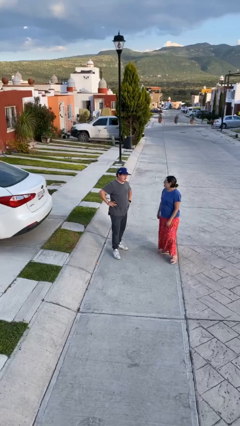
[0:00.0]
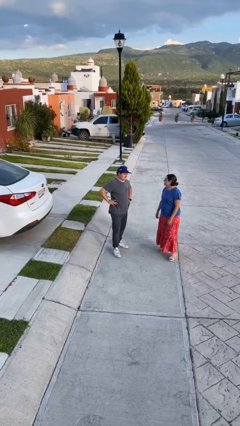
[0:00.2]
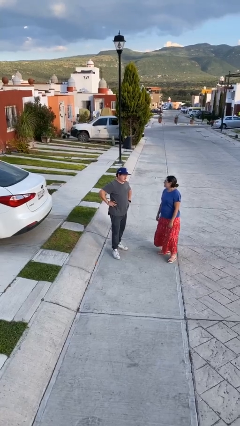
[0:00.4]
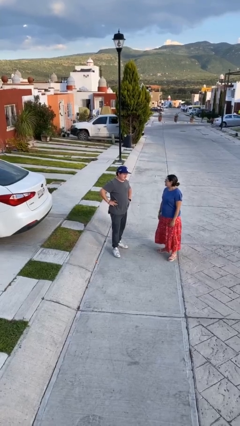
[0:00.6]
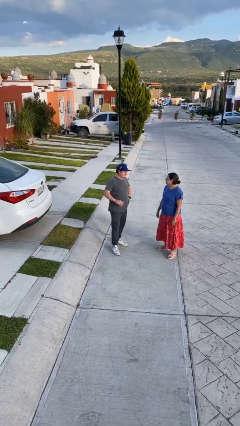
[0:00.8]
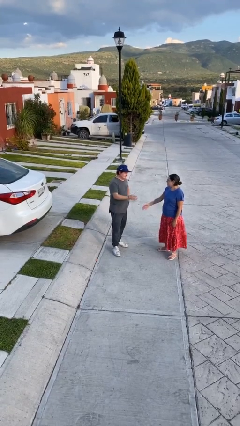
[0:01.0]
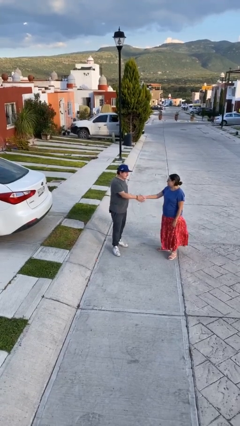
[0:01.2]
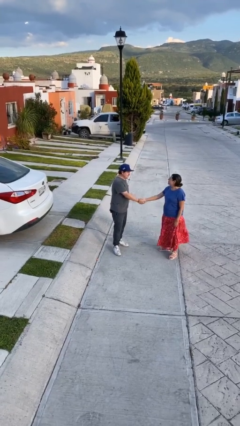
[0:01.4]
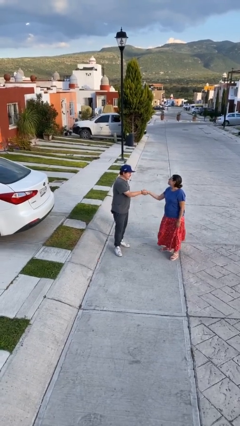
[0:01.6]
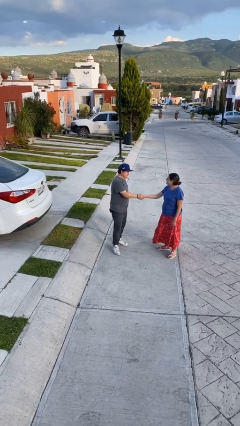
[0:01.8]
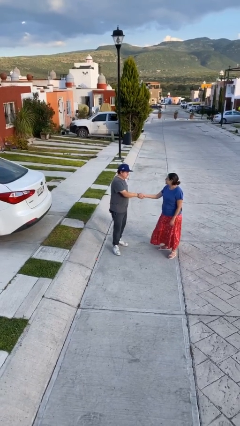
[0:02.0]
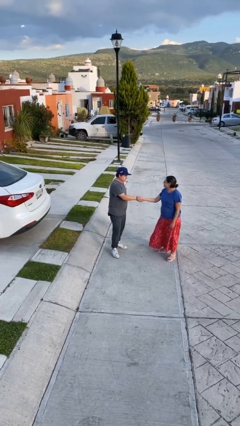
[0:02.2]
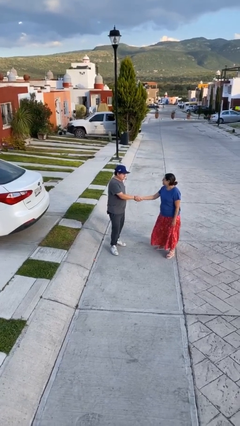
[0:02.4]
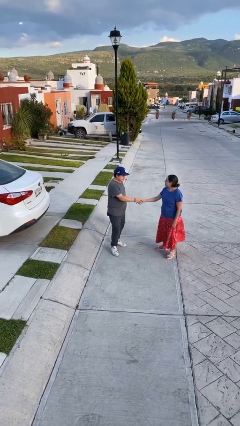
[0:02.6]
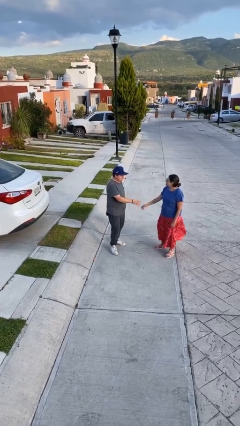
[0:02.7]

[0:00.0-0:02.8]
person shakes hand

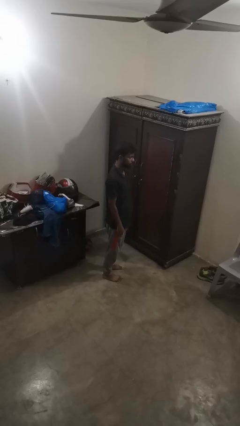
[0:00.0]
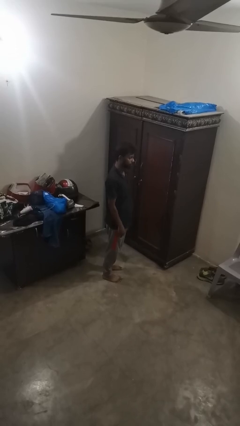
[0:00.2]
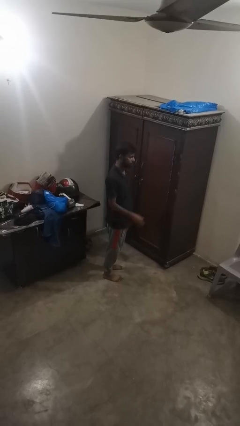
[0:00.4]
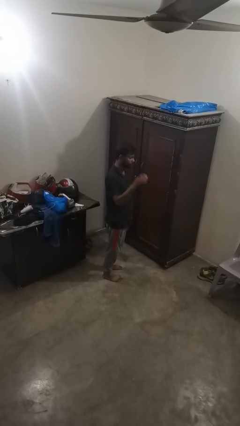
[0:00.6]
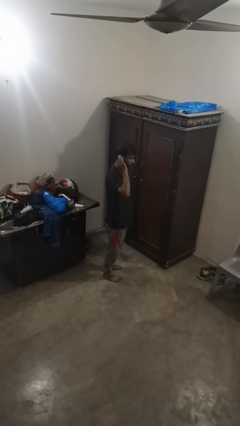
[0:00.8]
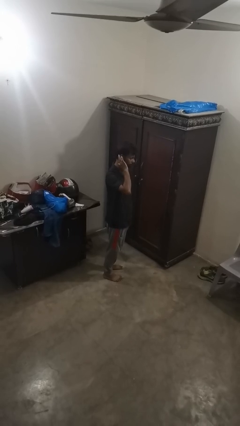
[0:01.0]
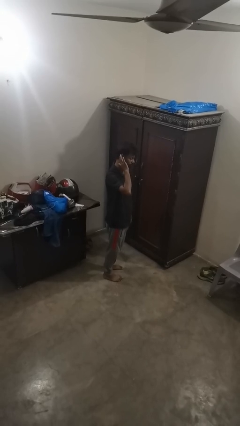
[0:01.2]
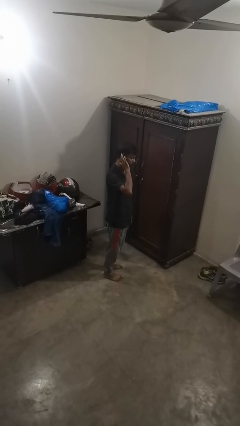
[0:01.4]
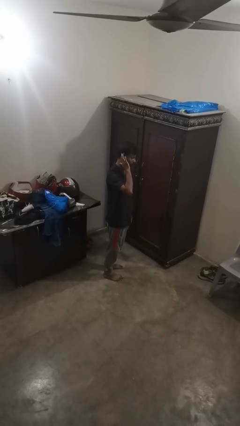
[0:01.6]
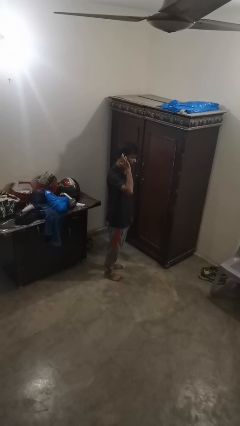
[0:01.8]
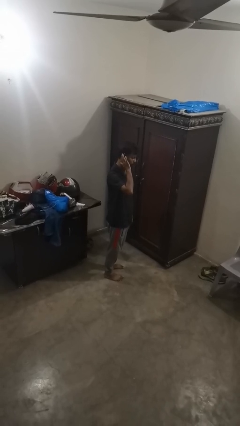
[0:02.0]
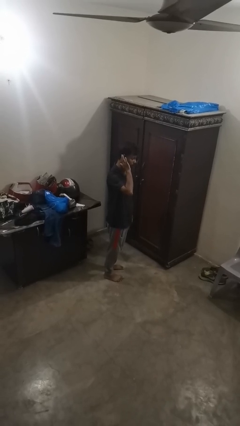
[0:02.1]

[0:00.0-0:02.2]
person gestures listen closely

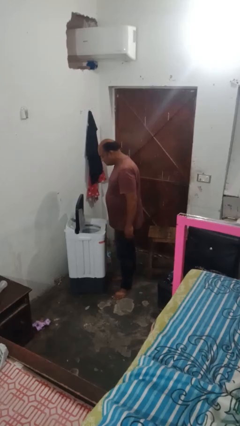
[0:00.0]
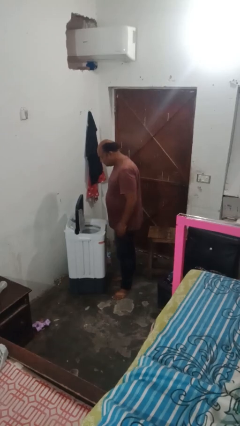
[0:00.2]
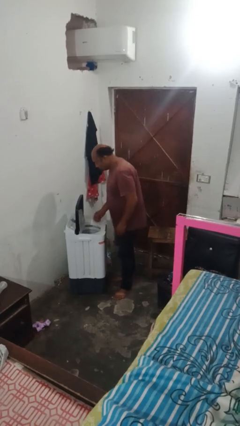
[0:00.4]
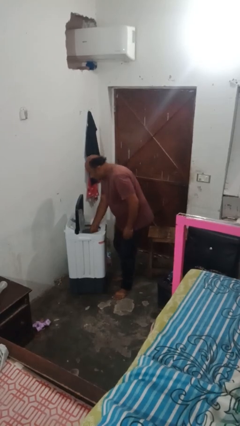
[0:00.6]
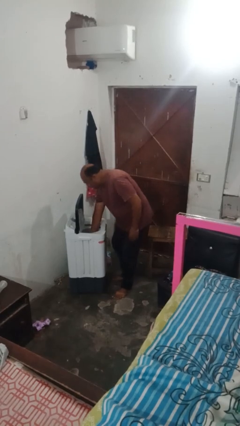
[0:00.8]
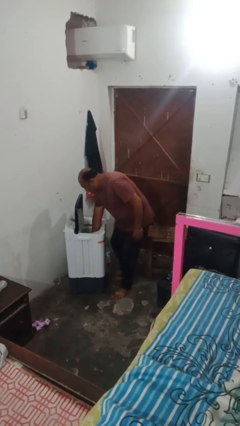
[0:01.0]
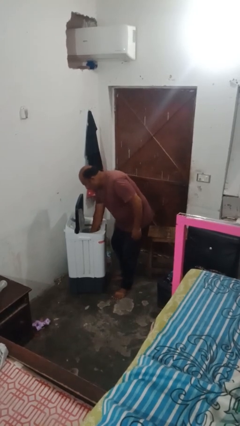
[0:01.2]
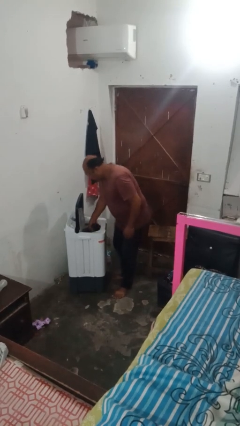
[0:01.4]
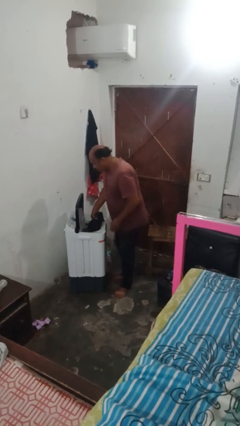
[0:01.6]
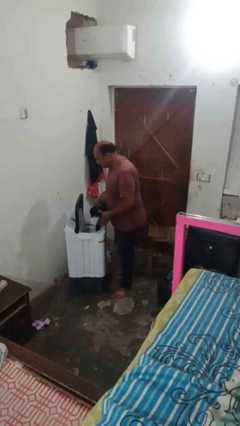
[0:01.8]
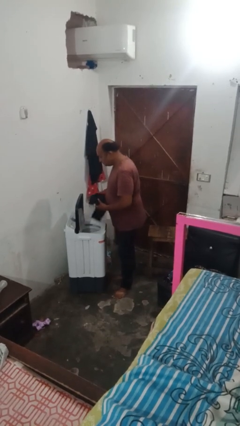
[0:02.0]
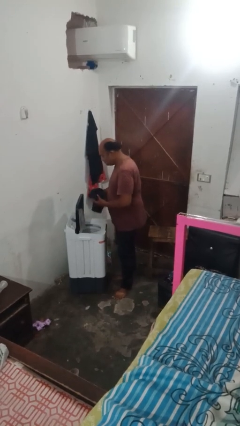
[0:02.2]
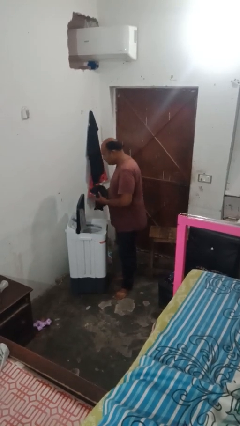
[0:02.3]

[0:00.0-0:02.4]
person unloads clotheswasher

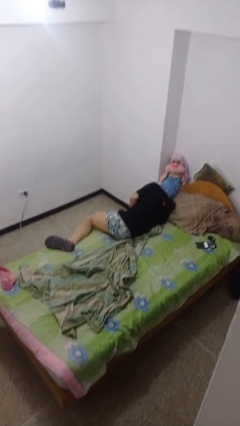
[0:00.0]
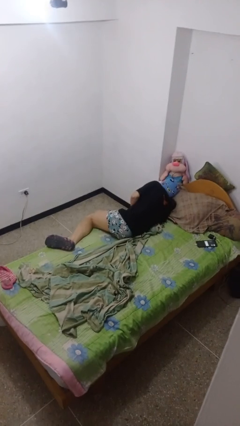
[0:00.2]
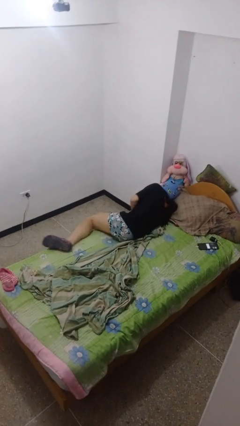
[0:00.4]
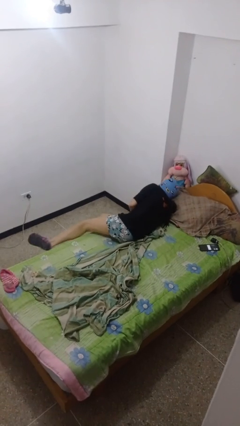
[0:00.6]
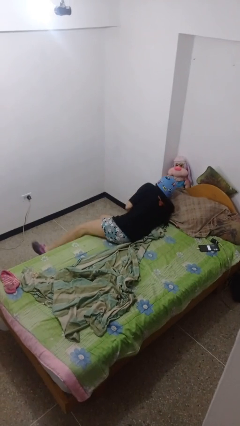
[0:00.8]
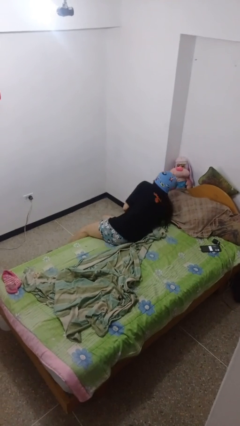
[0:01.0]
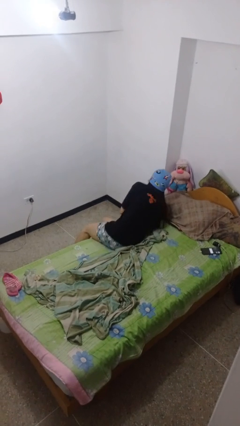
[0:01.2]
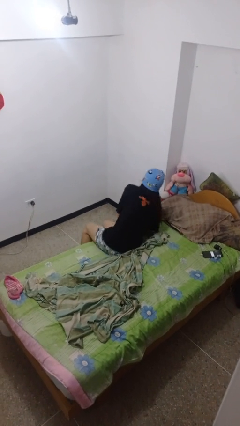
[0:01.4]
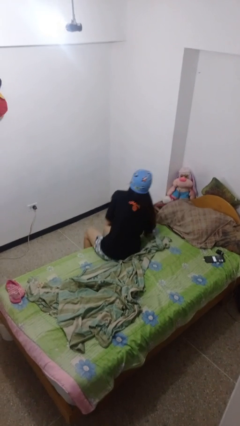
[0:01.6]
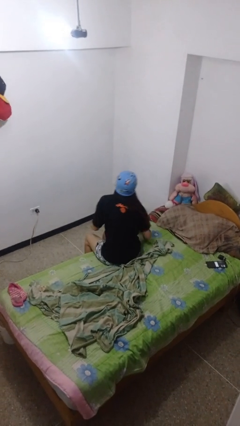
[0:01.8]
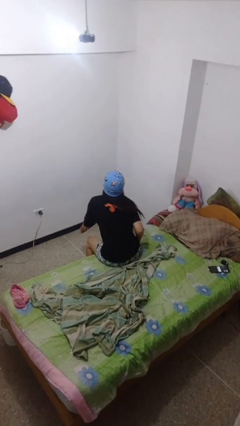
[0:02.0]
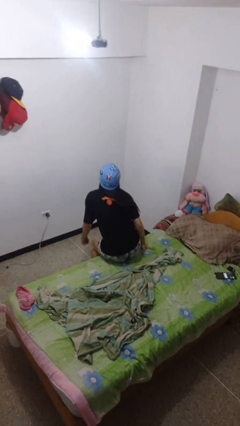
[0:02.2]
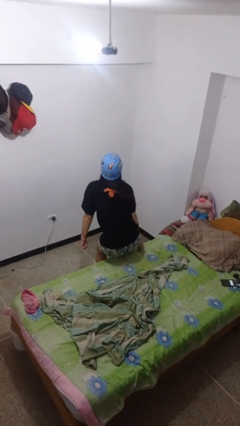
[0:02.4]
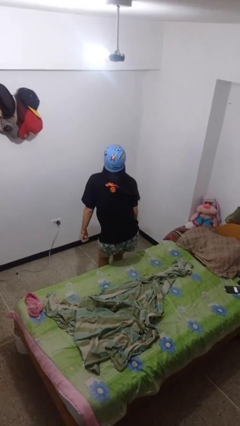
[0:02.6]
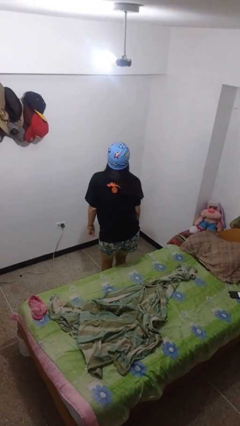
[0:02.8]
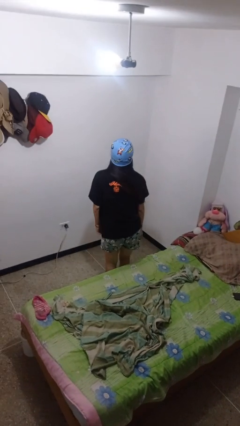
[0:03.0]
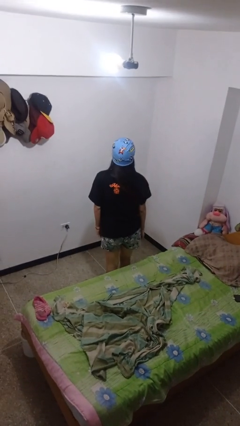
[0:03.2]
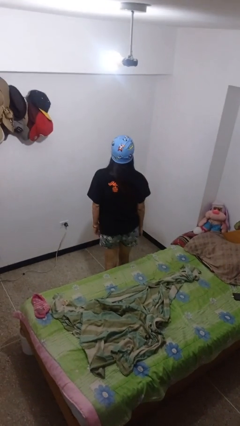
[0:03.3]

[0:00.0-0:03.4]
person stands up

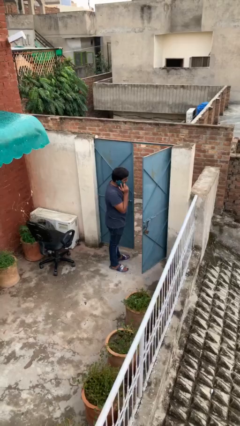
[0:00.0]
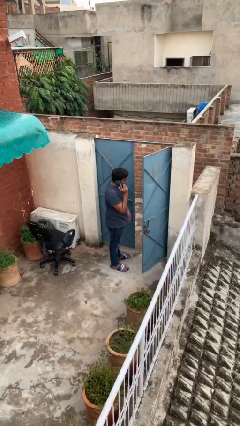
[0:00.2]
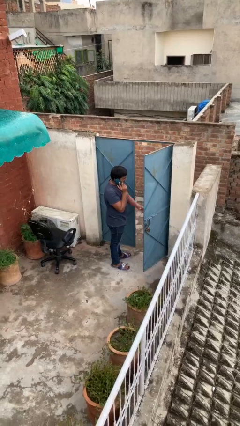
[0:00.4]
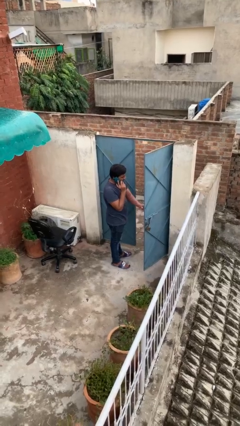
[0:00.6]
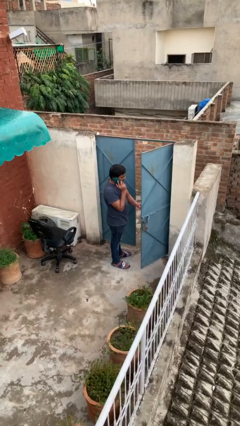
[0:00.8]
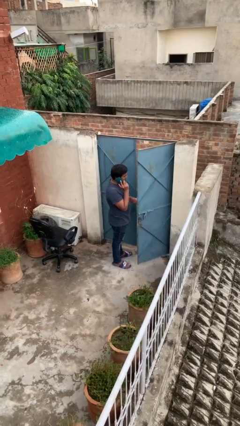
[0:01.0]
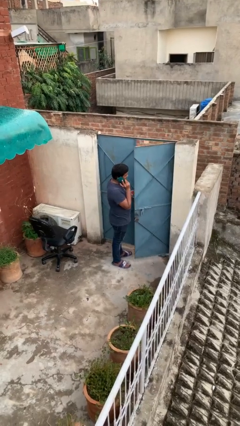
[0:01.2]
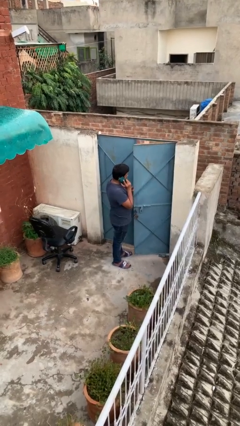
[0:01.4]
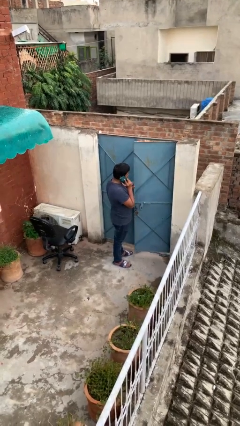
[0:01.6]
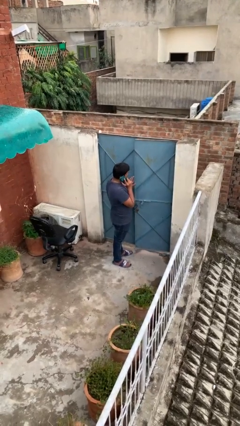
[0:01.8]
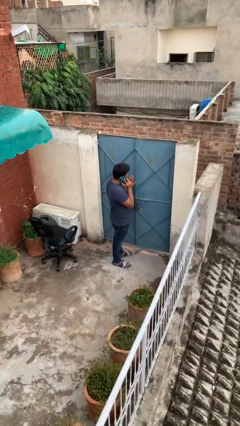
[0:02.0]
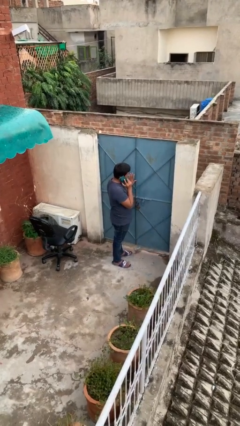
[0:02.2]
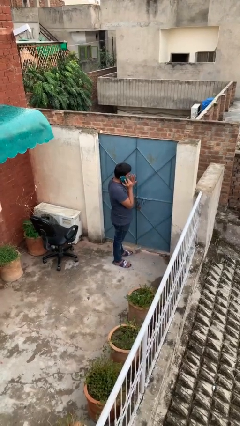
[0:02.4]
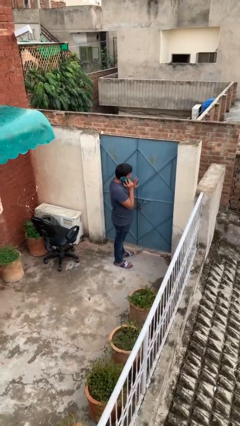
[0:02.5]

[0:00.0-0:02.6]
person closes facility door

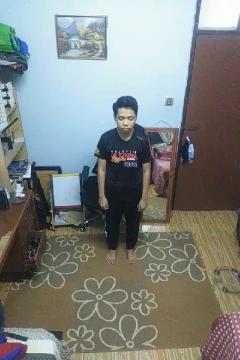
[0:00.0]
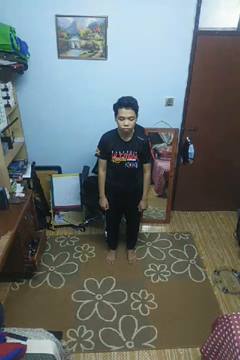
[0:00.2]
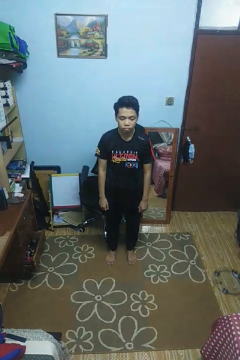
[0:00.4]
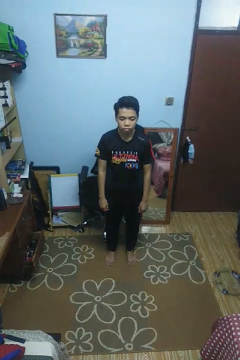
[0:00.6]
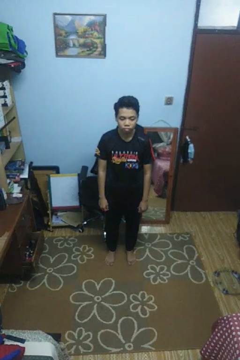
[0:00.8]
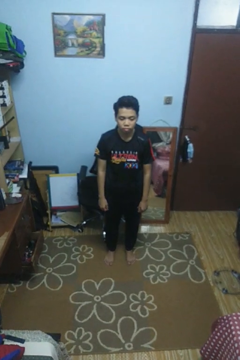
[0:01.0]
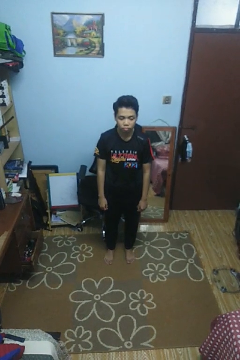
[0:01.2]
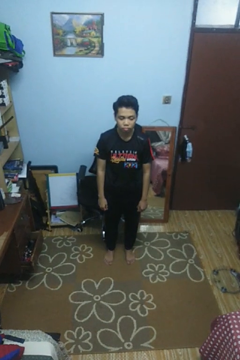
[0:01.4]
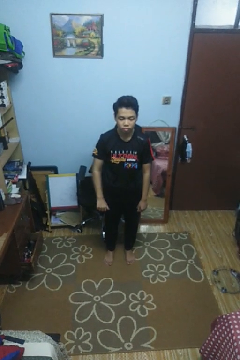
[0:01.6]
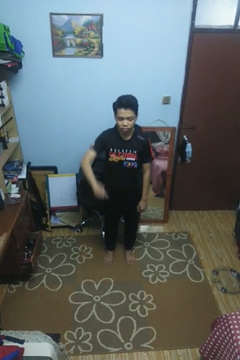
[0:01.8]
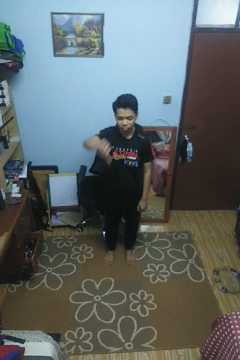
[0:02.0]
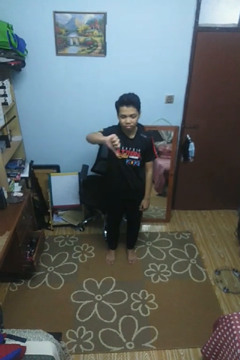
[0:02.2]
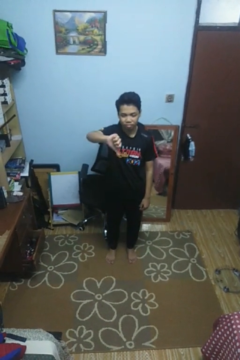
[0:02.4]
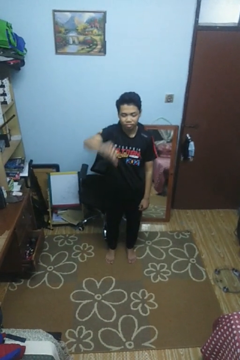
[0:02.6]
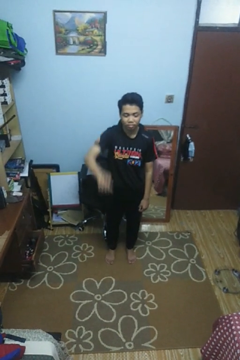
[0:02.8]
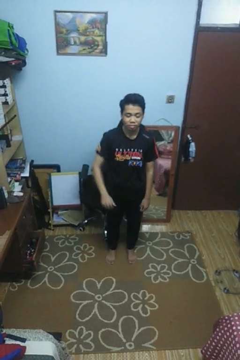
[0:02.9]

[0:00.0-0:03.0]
person gestures thumbs down

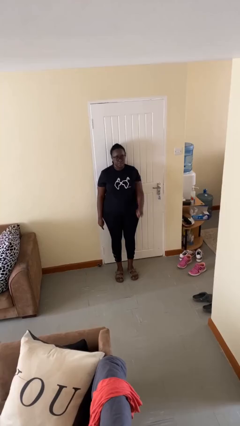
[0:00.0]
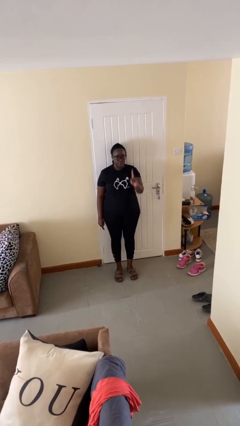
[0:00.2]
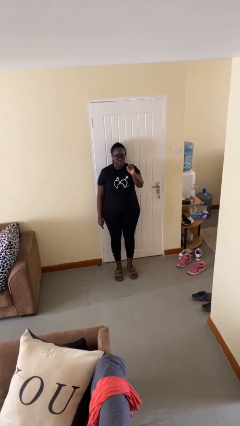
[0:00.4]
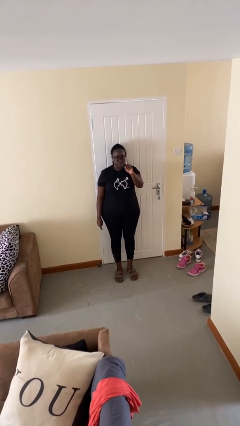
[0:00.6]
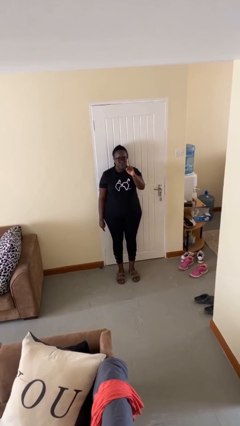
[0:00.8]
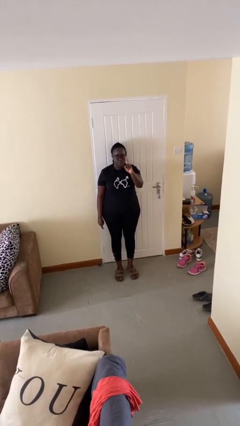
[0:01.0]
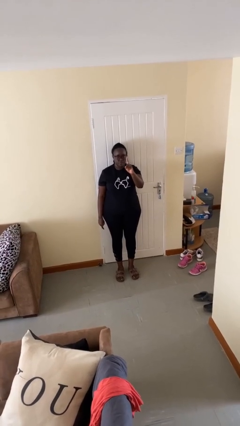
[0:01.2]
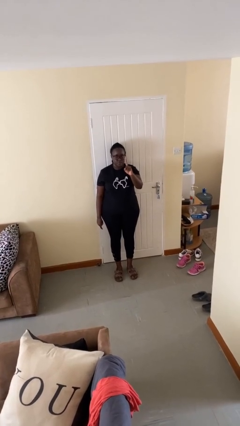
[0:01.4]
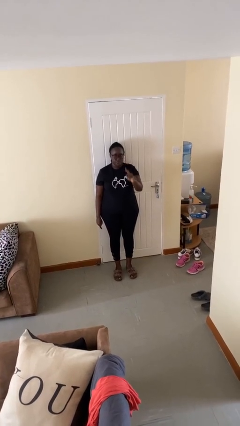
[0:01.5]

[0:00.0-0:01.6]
person gestures number one
